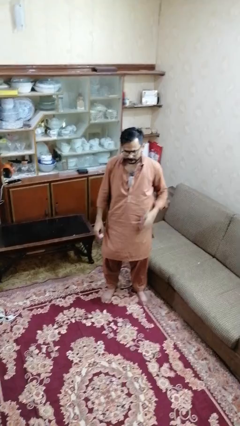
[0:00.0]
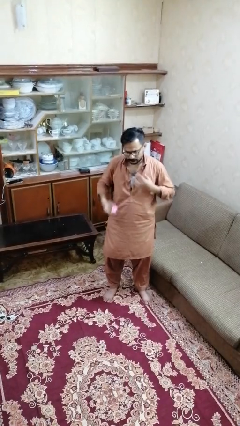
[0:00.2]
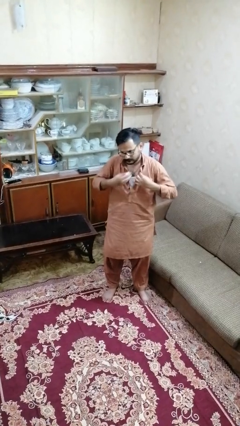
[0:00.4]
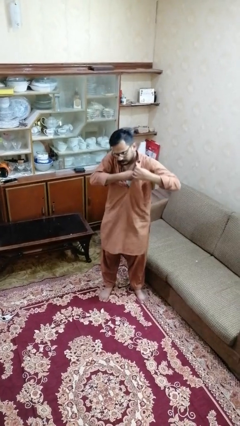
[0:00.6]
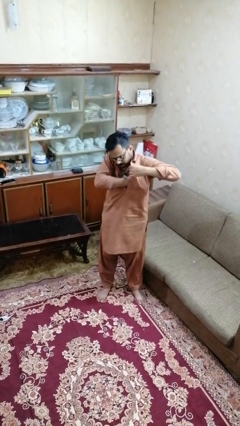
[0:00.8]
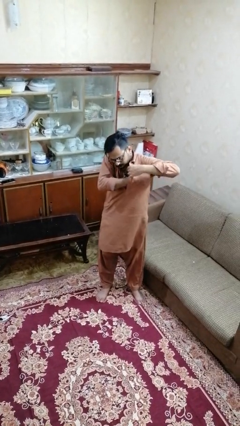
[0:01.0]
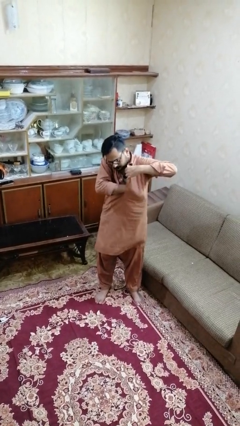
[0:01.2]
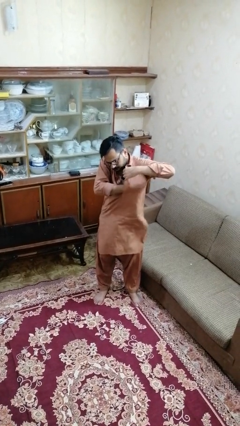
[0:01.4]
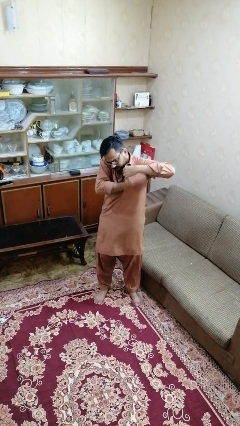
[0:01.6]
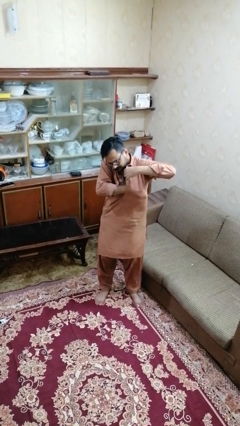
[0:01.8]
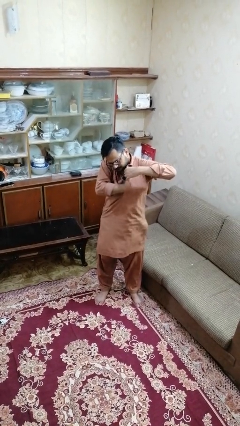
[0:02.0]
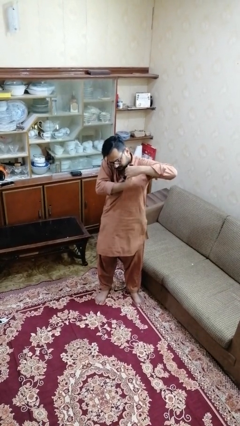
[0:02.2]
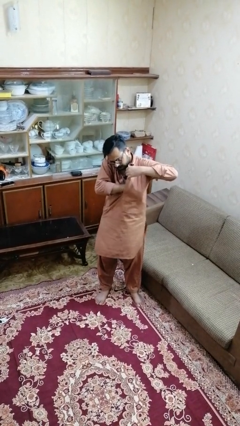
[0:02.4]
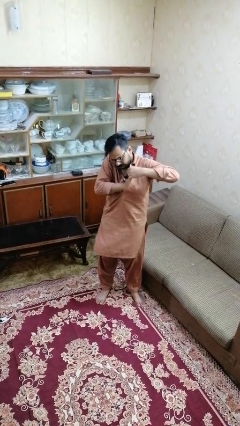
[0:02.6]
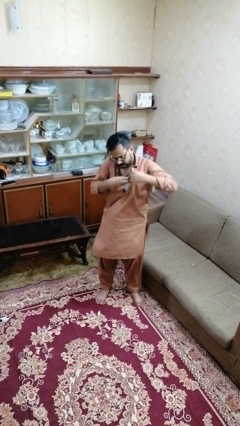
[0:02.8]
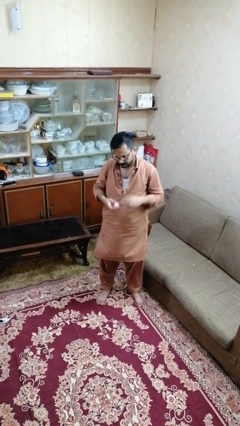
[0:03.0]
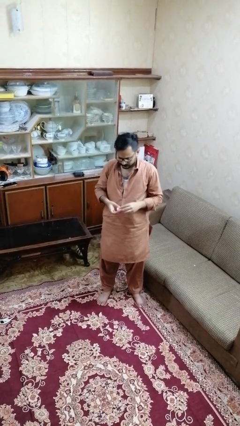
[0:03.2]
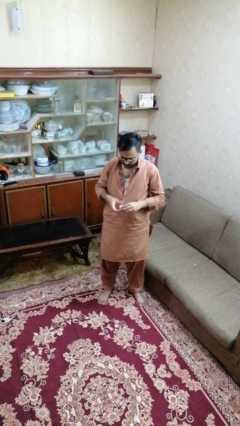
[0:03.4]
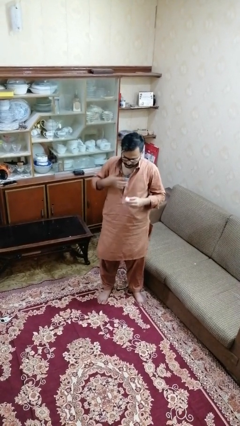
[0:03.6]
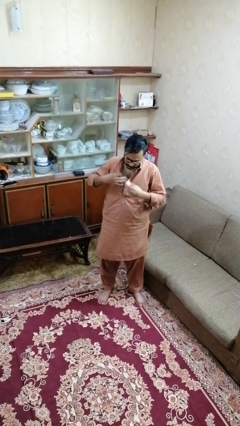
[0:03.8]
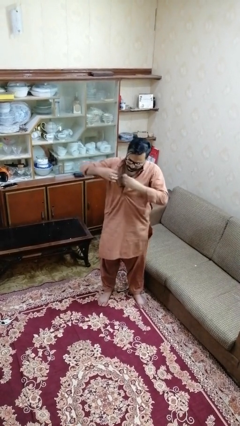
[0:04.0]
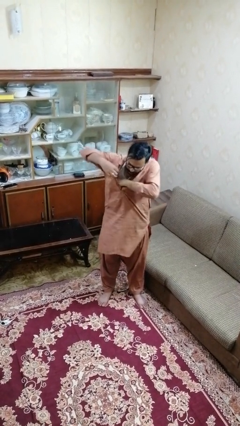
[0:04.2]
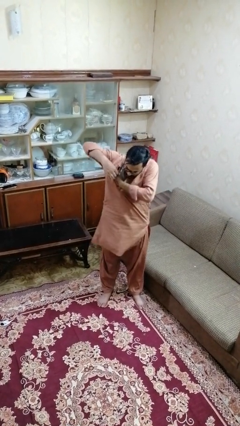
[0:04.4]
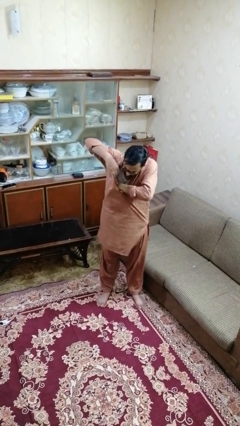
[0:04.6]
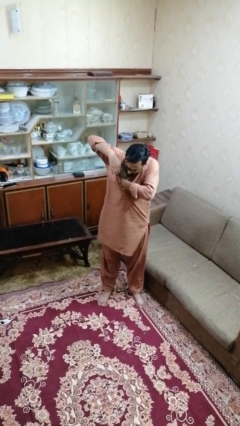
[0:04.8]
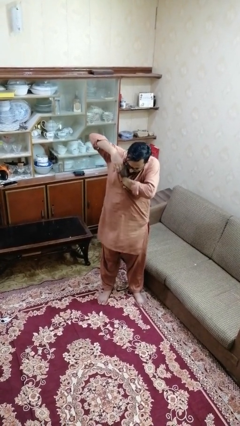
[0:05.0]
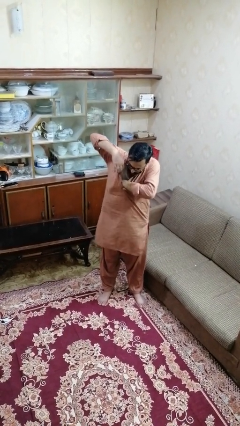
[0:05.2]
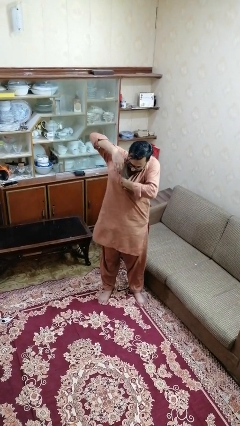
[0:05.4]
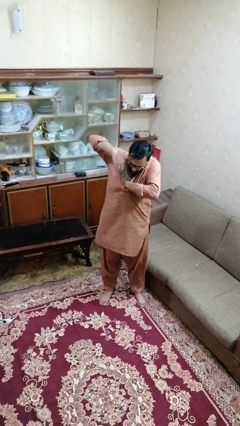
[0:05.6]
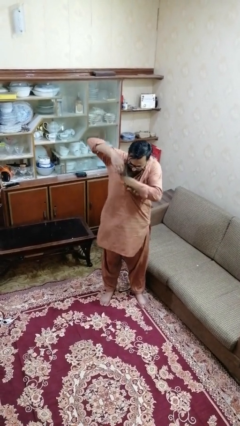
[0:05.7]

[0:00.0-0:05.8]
person applies deodorant

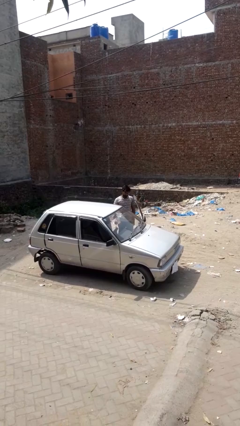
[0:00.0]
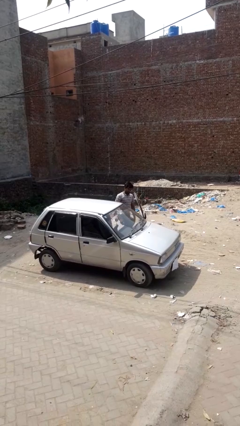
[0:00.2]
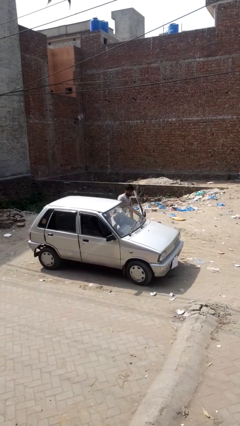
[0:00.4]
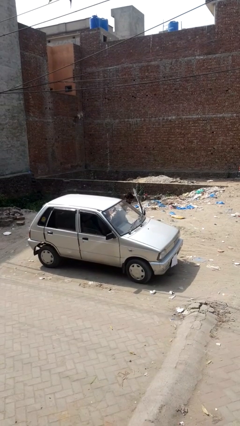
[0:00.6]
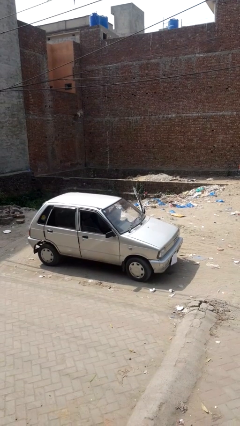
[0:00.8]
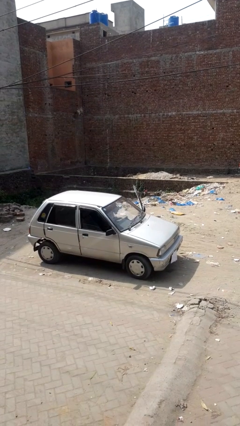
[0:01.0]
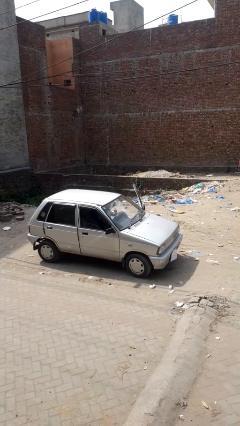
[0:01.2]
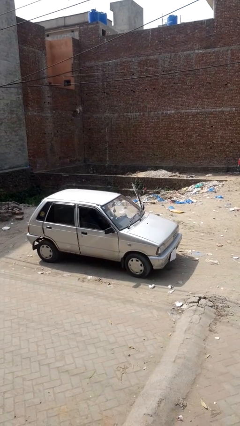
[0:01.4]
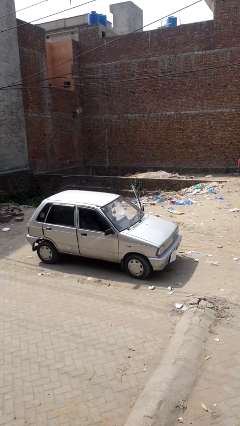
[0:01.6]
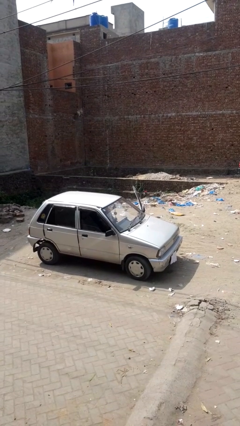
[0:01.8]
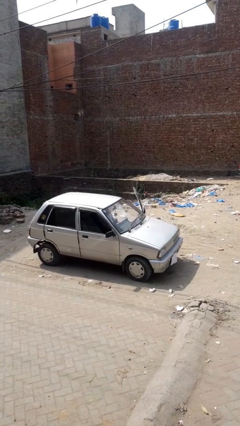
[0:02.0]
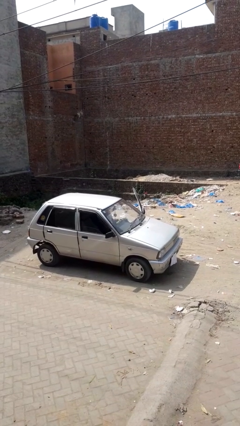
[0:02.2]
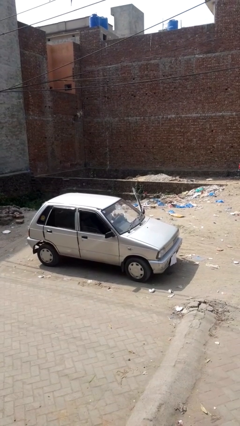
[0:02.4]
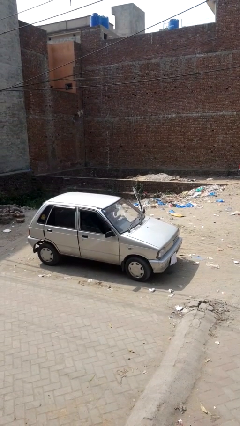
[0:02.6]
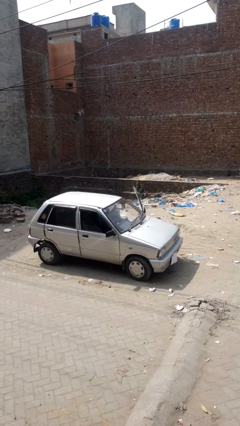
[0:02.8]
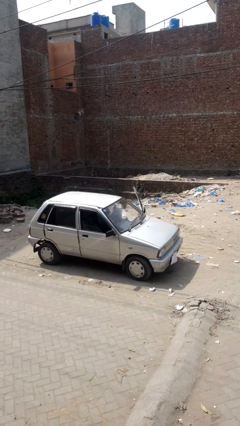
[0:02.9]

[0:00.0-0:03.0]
person enters car

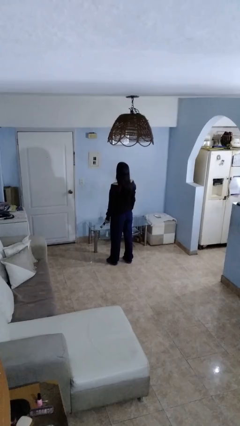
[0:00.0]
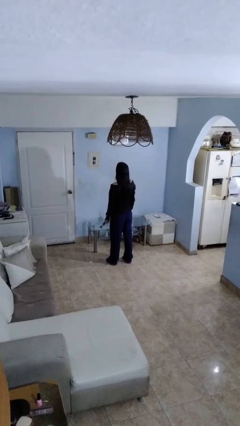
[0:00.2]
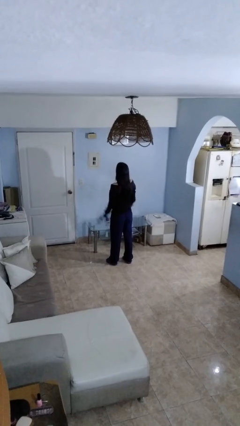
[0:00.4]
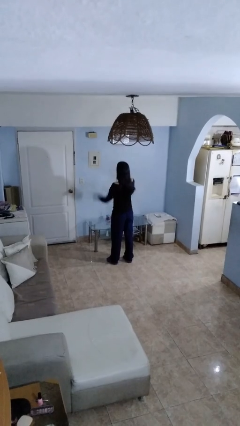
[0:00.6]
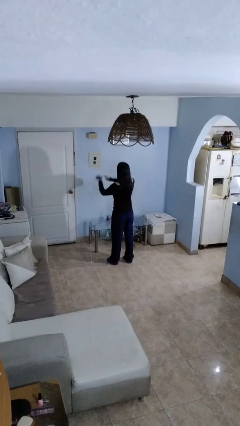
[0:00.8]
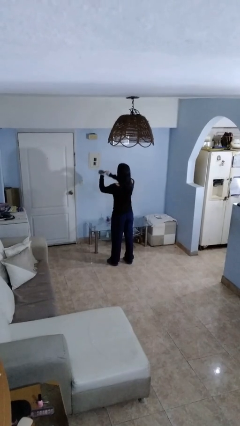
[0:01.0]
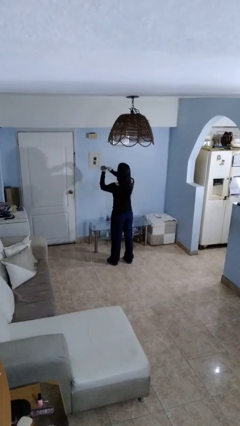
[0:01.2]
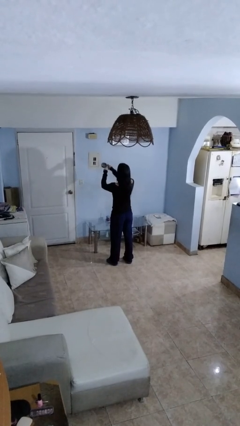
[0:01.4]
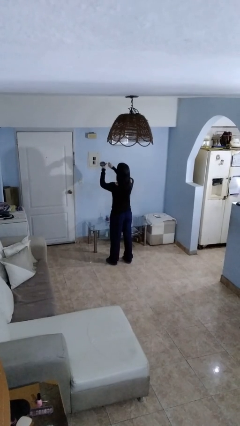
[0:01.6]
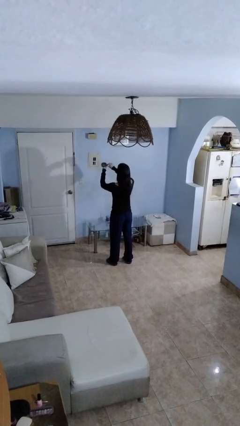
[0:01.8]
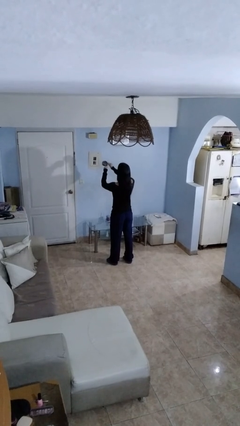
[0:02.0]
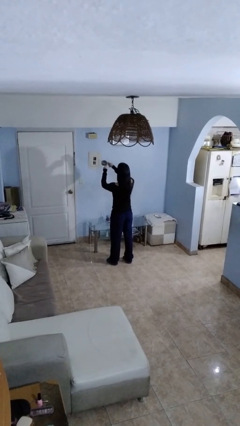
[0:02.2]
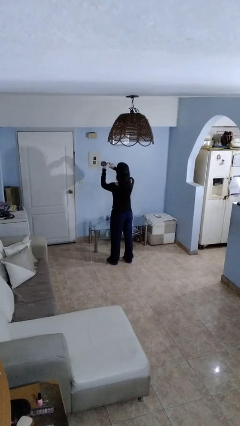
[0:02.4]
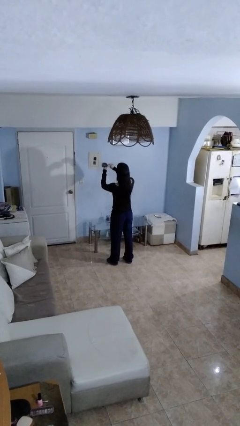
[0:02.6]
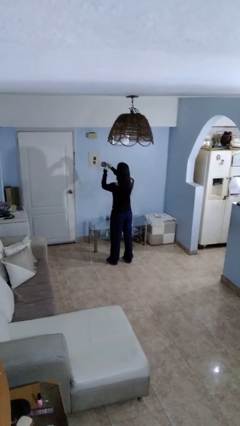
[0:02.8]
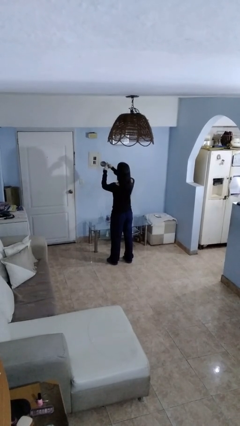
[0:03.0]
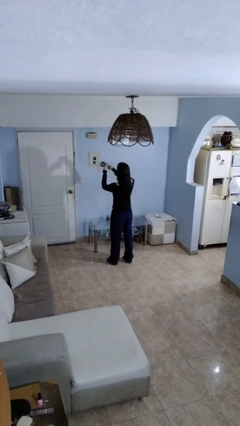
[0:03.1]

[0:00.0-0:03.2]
person opens can with can opener

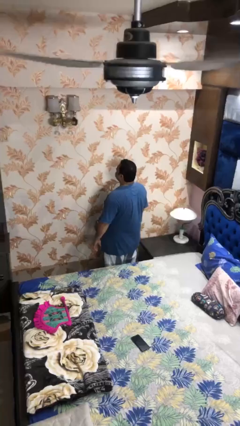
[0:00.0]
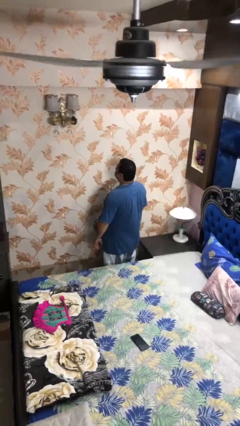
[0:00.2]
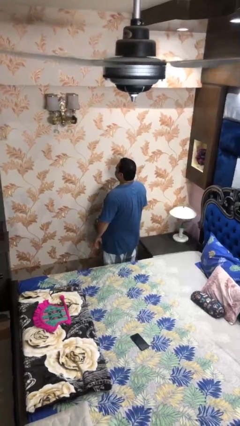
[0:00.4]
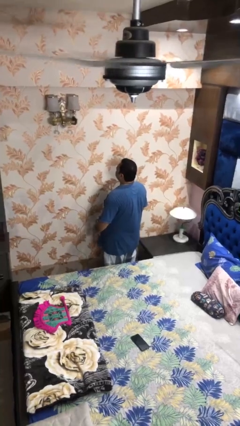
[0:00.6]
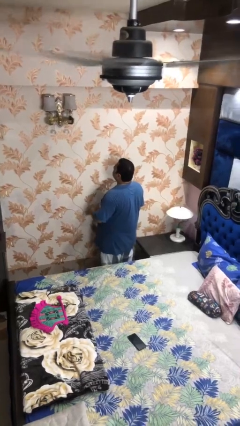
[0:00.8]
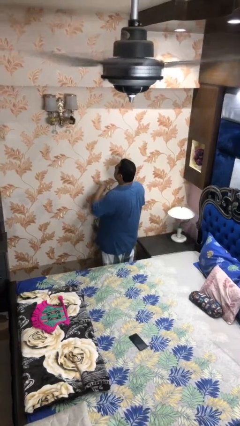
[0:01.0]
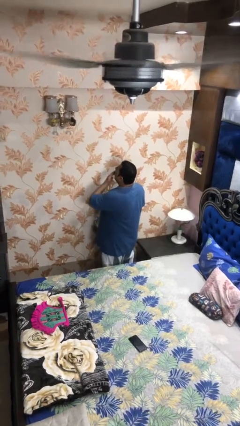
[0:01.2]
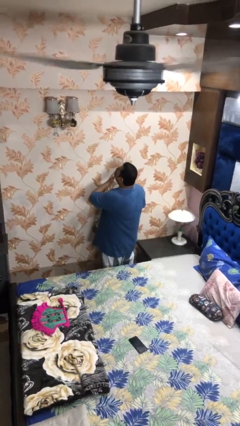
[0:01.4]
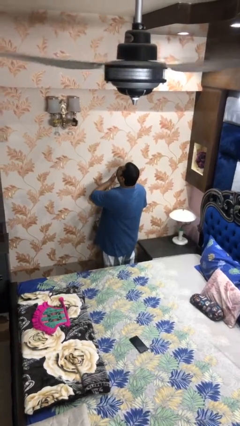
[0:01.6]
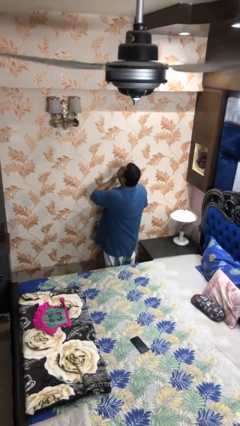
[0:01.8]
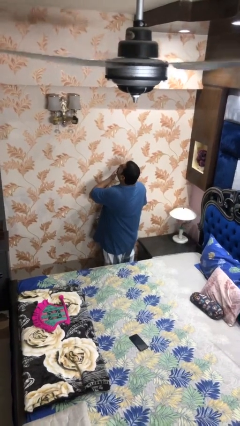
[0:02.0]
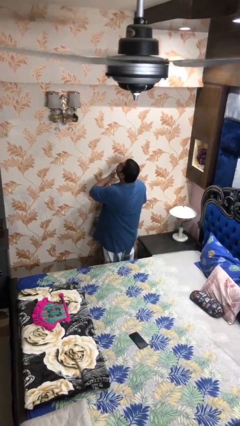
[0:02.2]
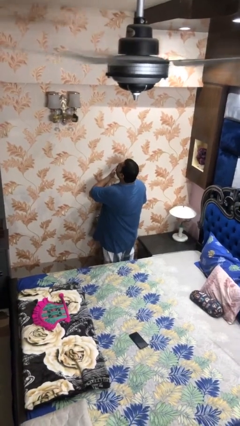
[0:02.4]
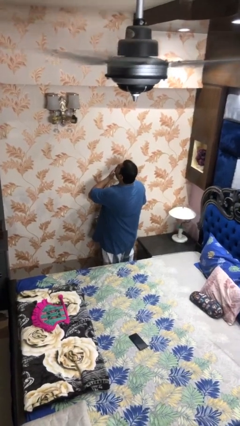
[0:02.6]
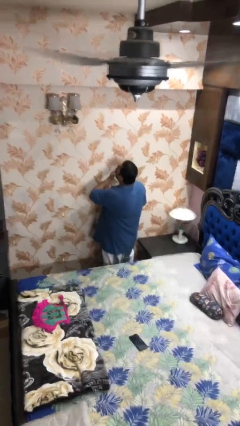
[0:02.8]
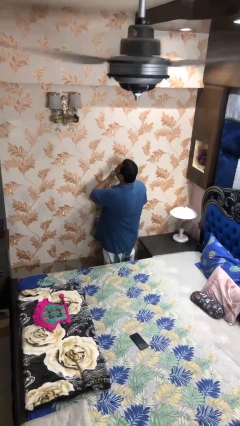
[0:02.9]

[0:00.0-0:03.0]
person yawns

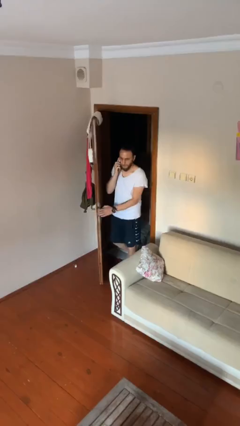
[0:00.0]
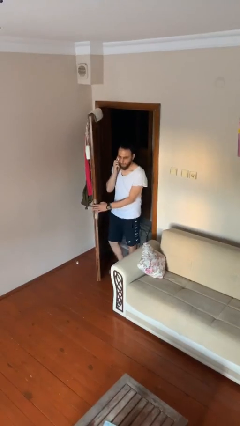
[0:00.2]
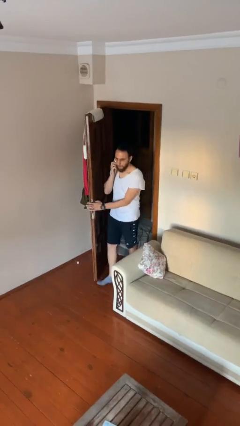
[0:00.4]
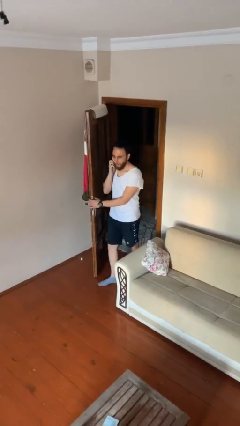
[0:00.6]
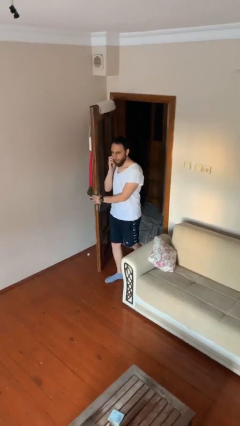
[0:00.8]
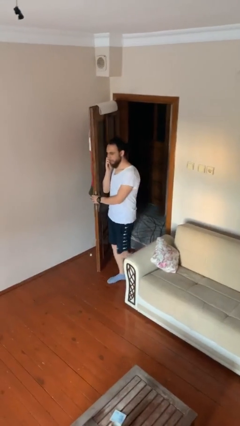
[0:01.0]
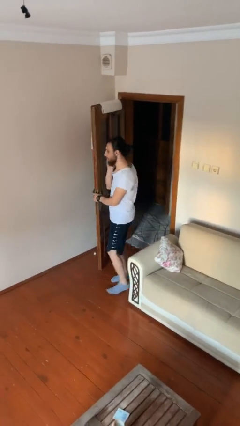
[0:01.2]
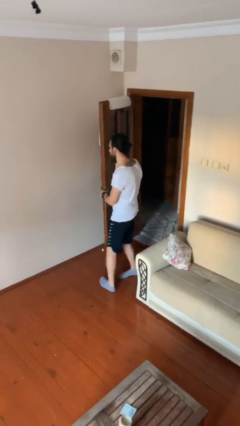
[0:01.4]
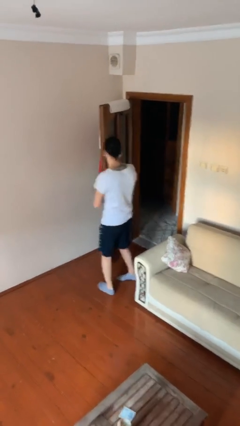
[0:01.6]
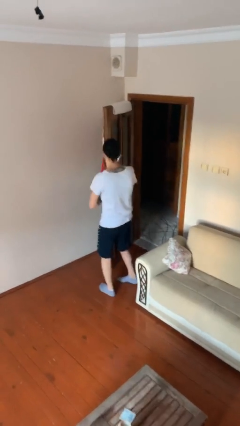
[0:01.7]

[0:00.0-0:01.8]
person enters scene through structure

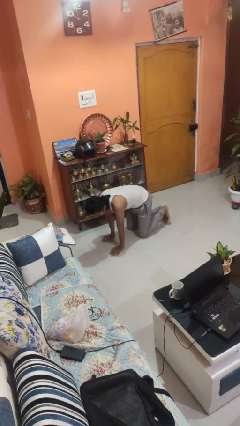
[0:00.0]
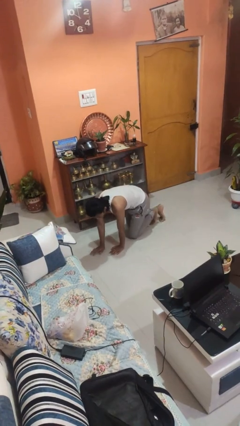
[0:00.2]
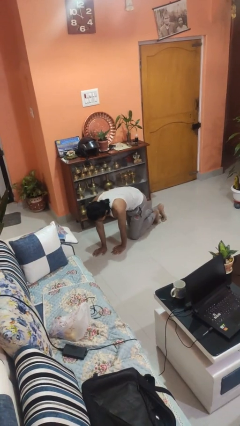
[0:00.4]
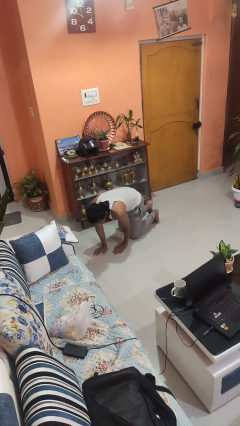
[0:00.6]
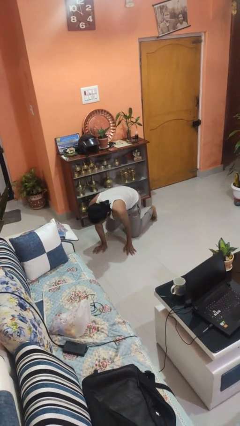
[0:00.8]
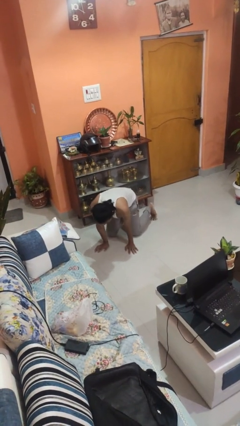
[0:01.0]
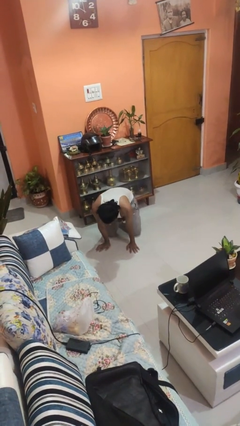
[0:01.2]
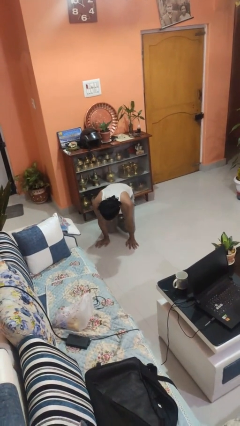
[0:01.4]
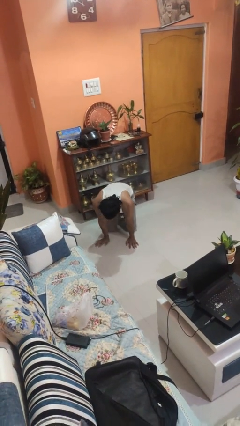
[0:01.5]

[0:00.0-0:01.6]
person crawls
